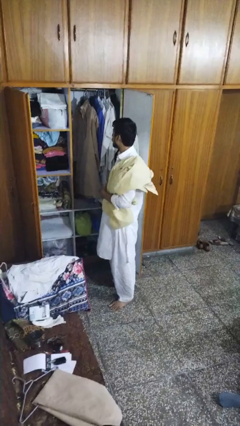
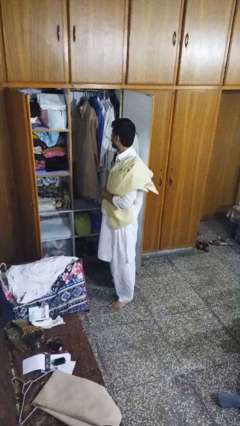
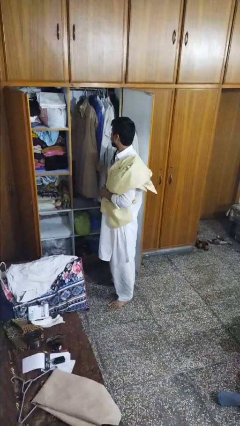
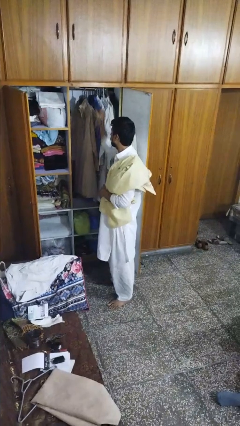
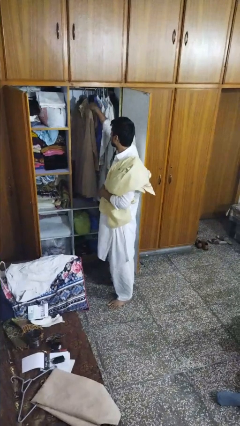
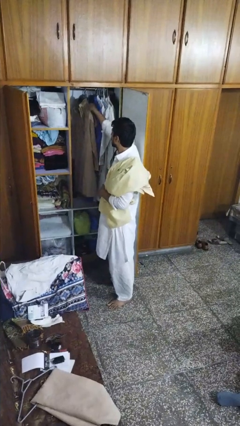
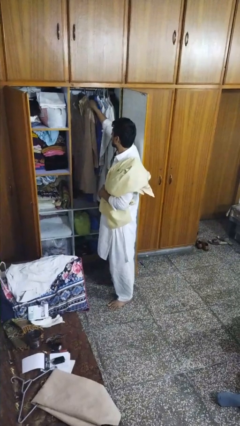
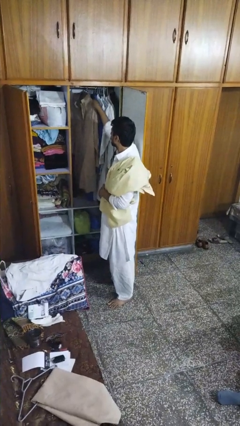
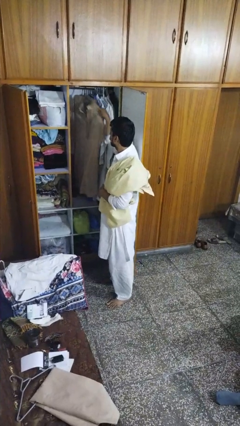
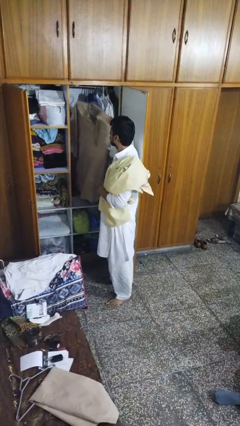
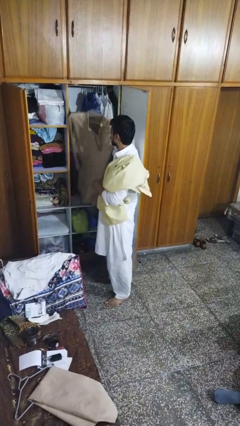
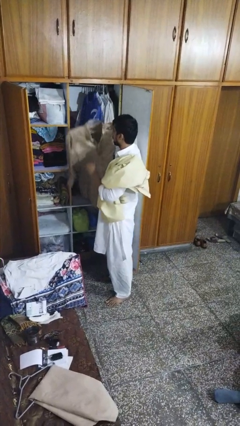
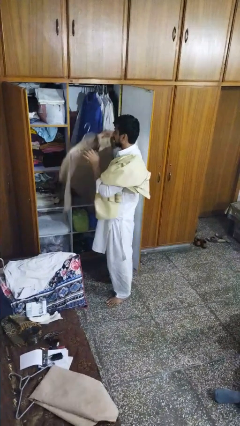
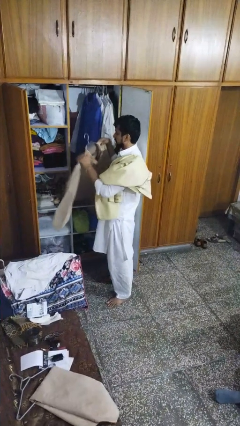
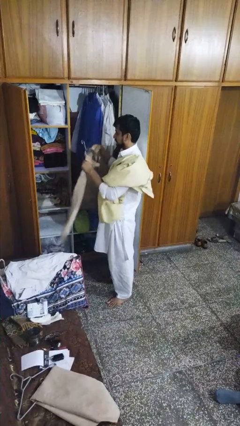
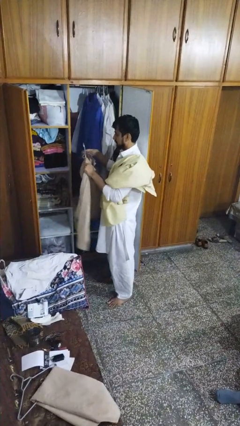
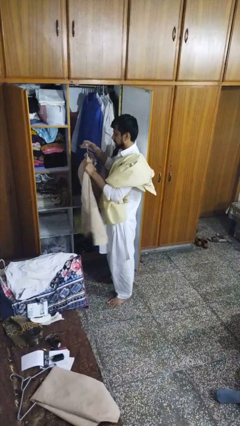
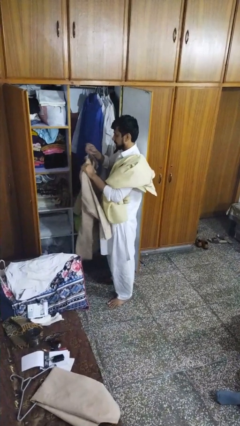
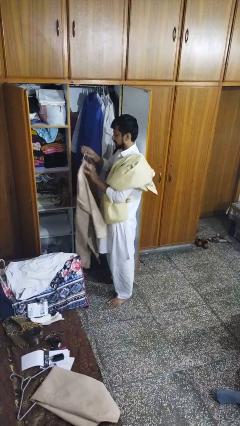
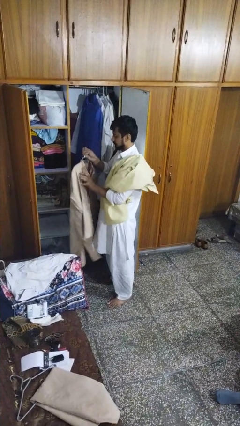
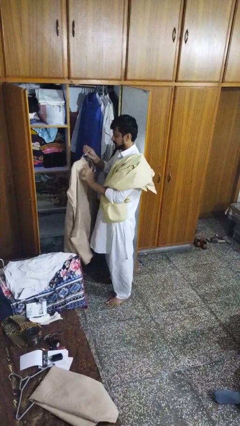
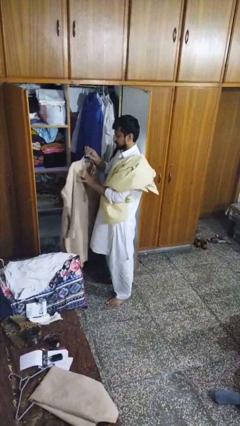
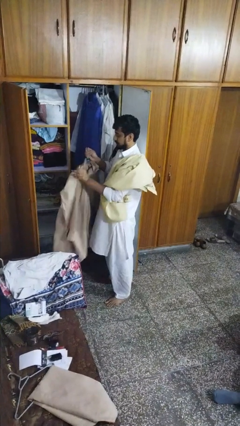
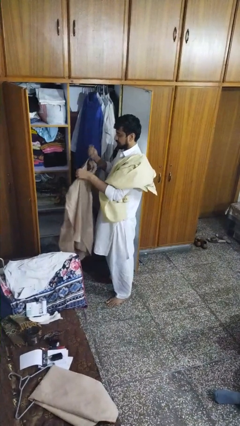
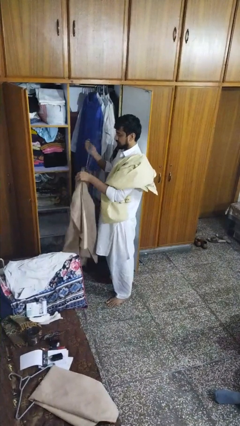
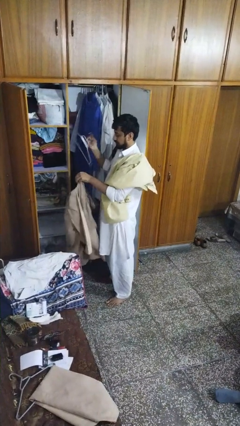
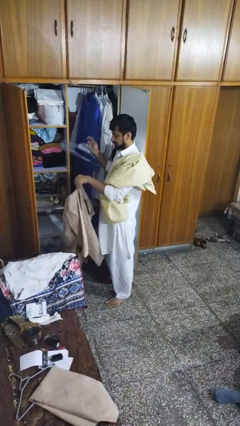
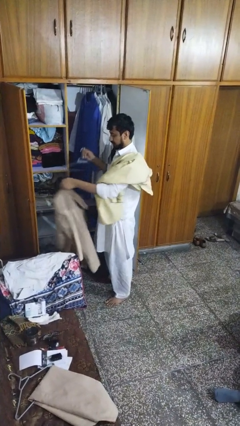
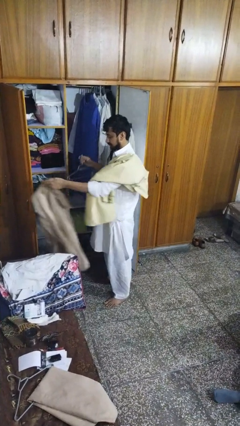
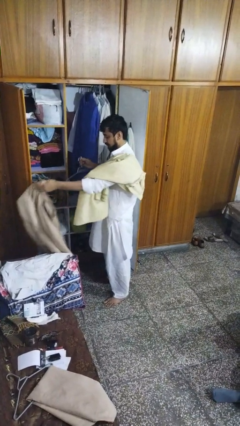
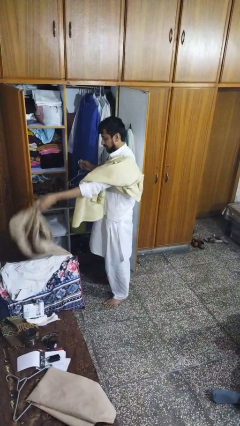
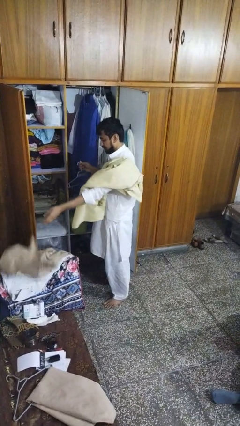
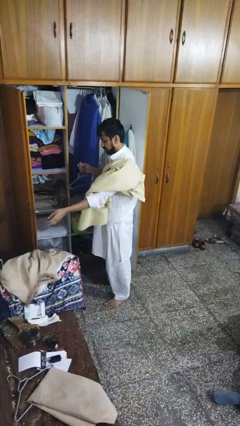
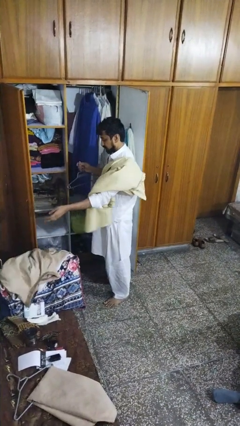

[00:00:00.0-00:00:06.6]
person takes clothes from closet

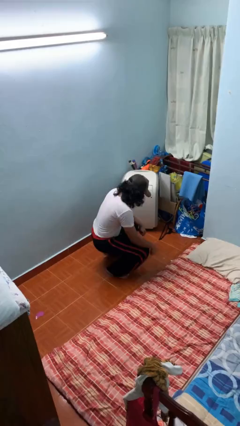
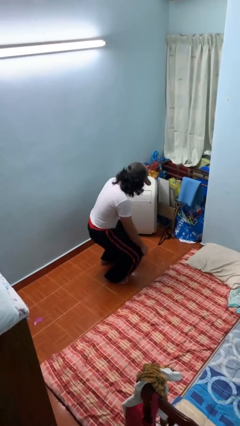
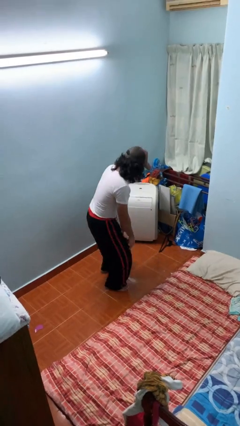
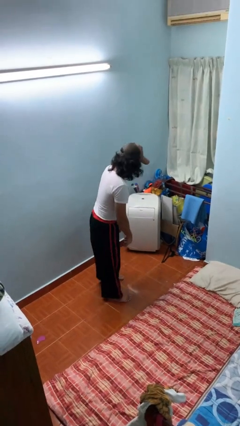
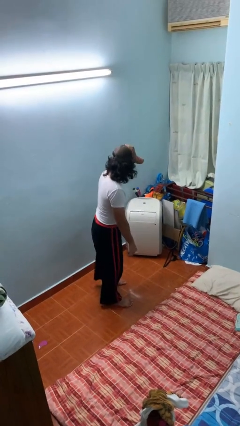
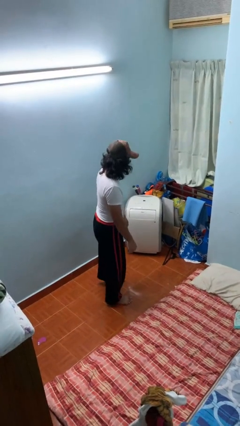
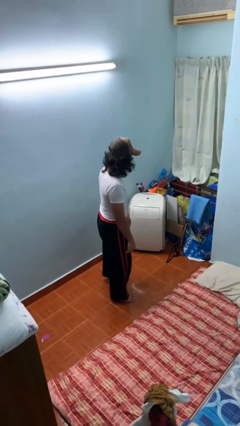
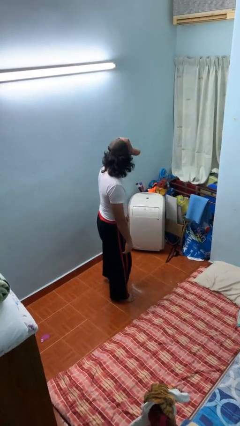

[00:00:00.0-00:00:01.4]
person stands up

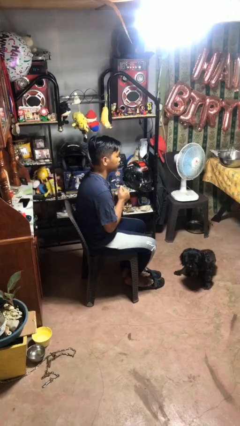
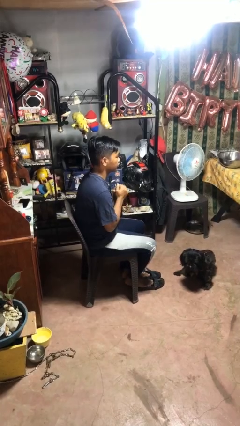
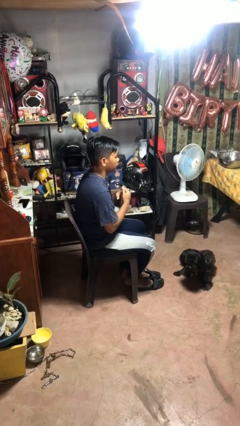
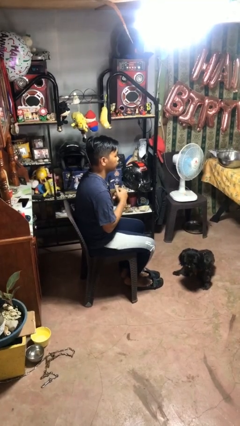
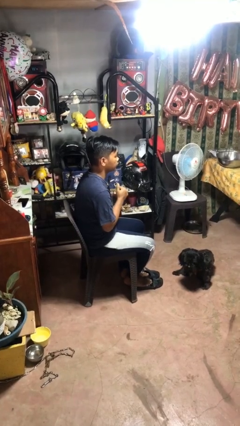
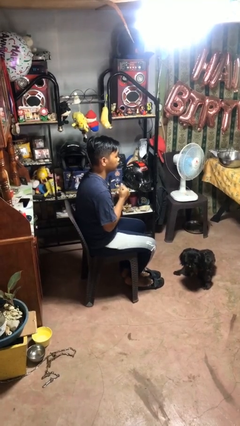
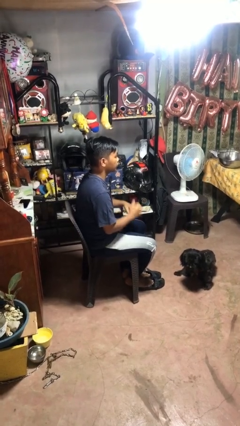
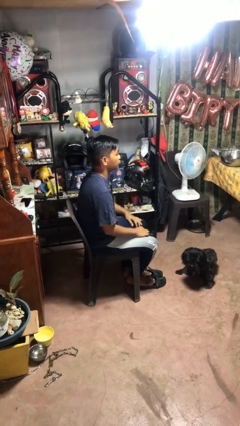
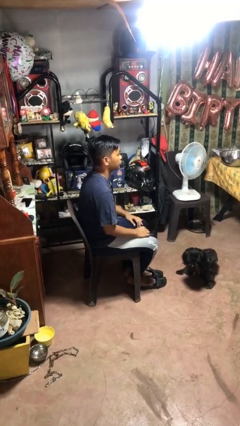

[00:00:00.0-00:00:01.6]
person cracks knuckles

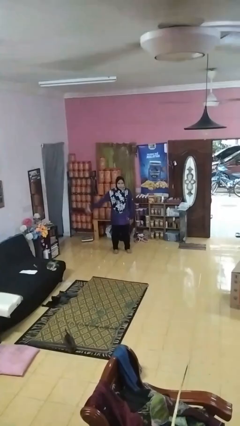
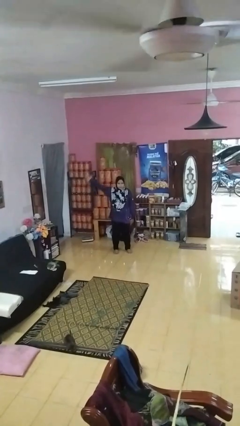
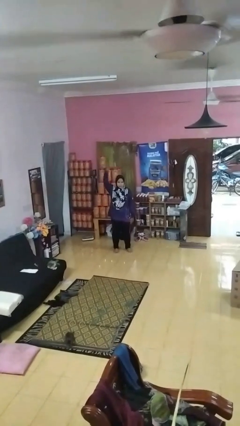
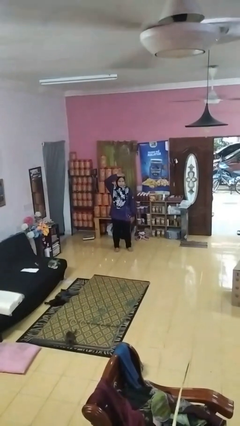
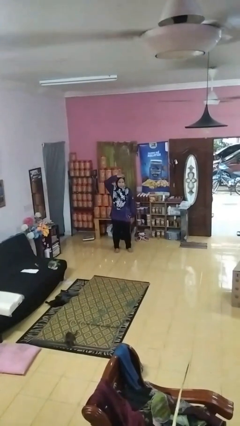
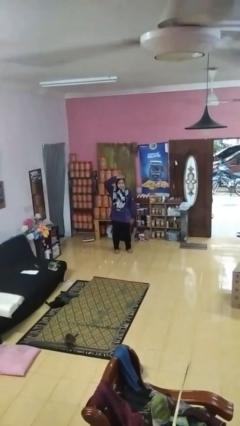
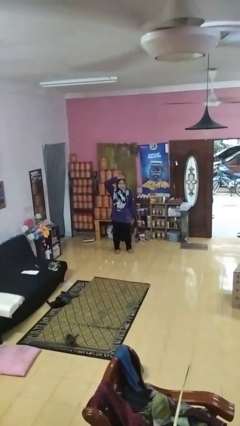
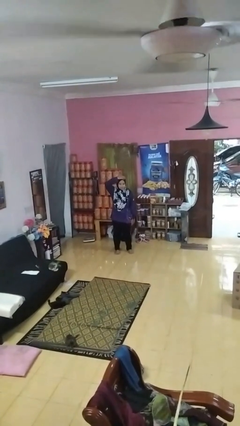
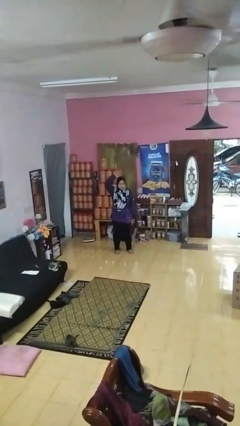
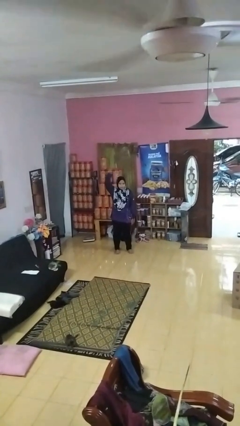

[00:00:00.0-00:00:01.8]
person pats head

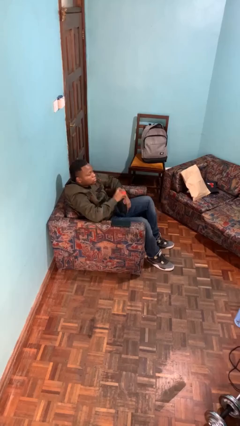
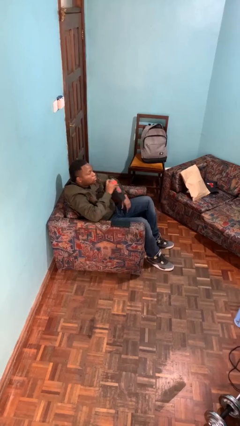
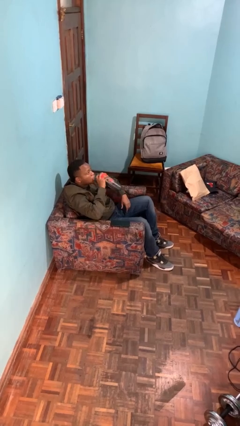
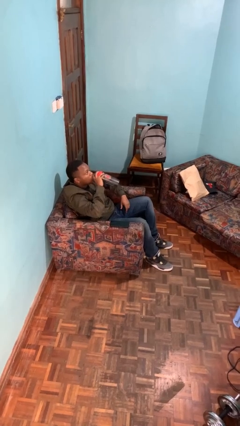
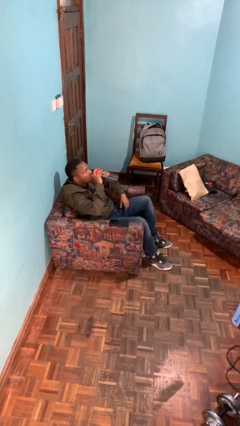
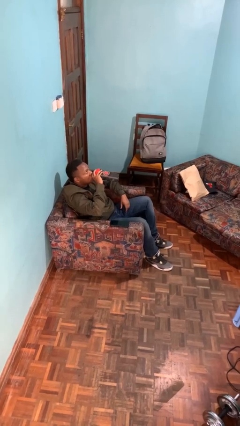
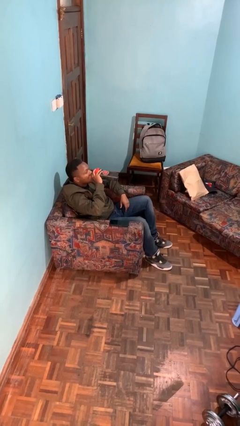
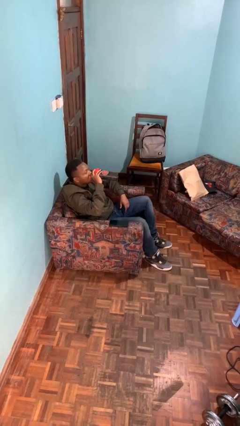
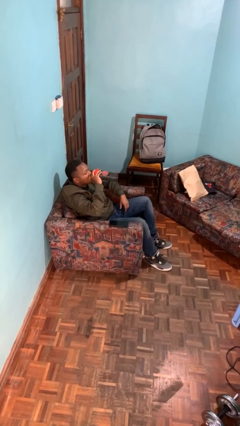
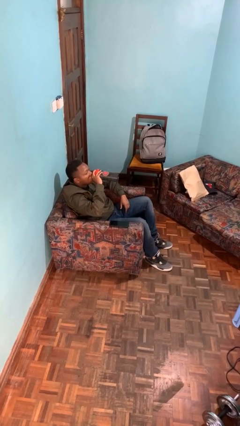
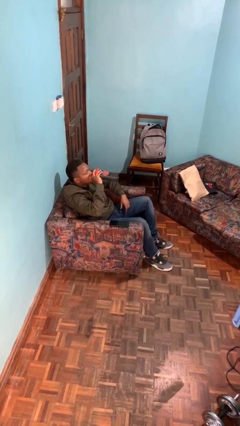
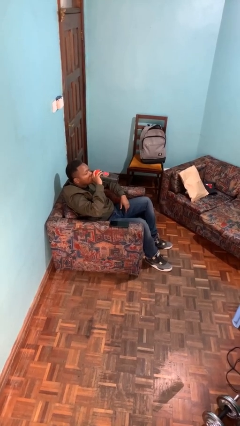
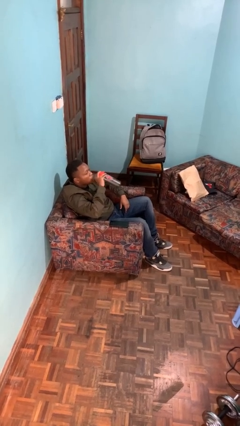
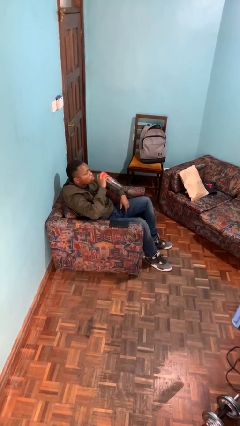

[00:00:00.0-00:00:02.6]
person drinks from bottle

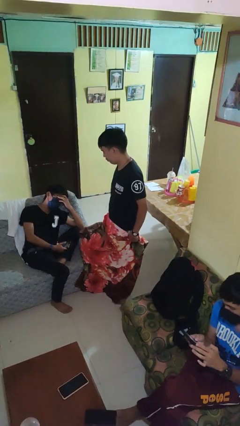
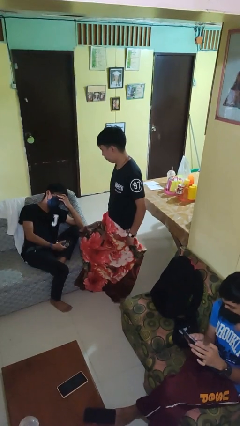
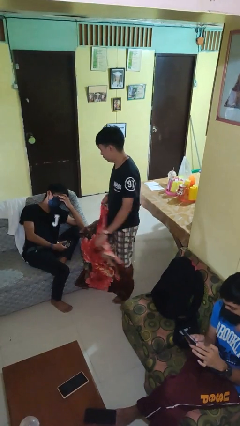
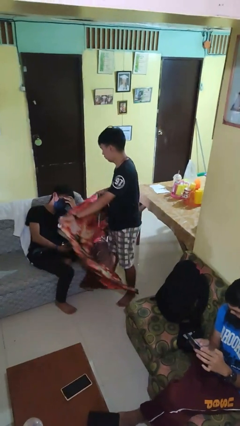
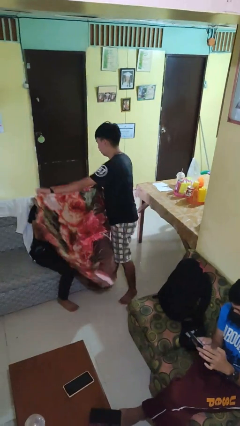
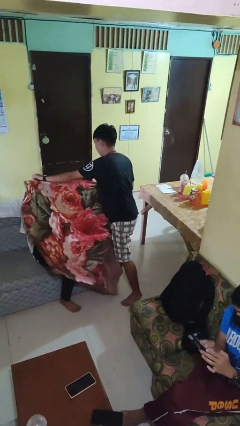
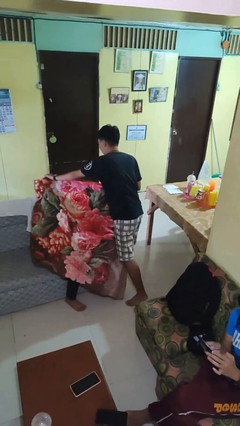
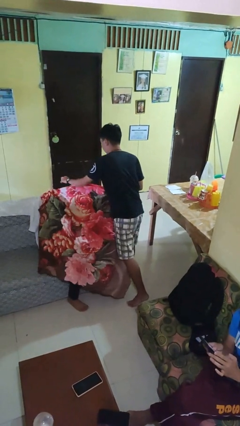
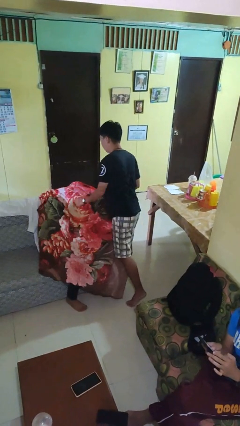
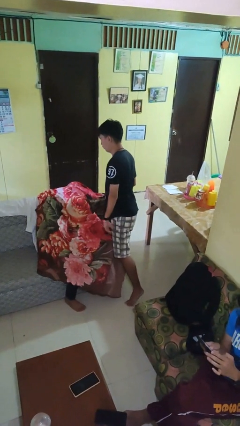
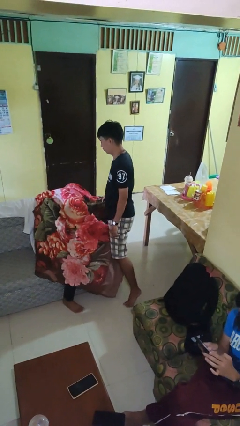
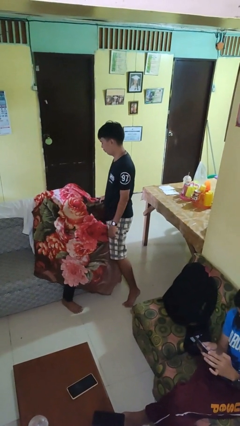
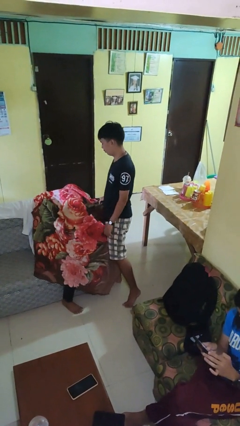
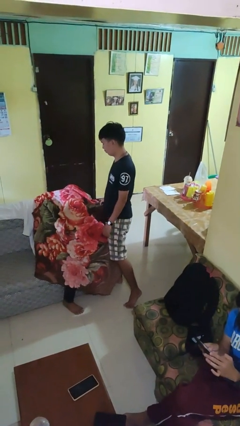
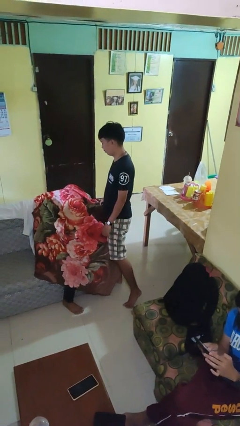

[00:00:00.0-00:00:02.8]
person covers friend with blanket
